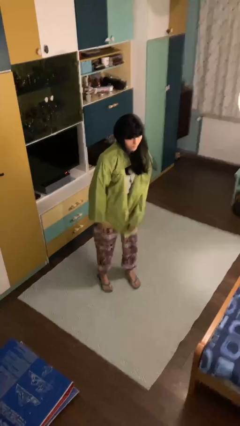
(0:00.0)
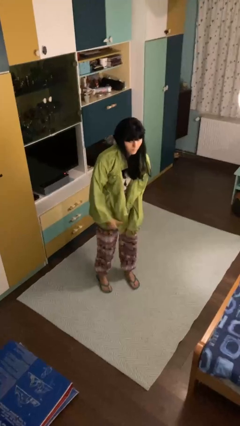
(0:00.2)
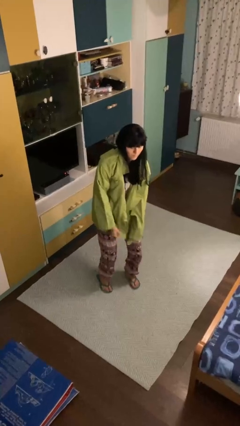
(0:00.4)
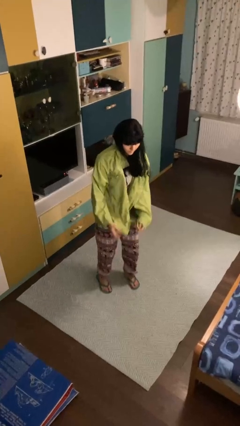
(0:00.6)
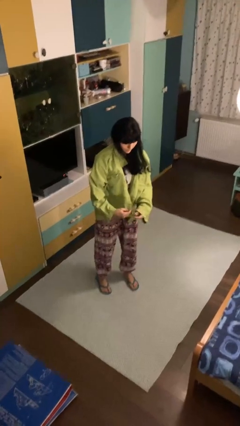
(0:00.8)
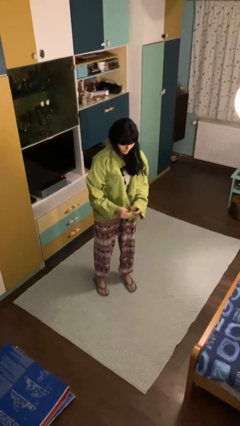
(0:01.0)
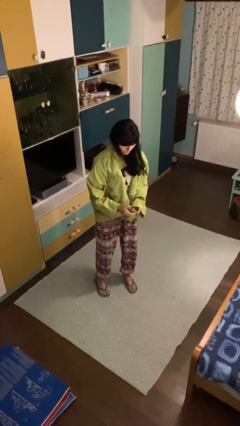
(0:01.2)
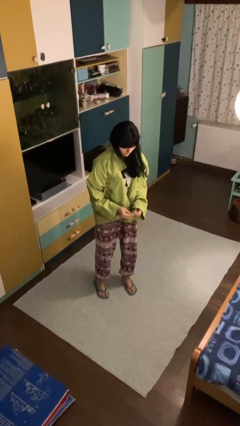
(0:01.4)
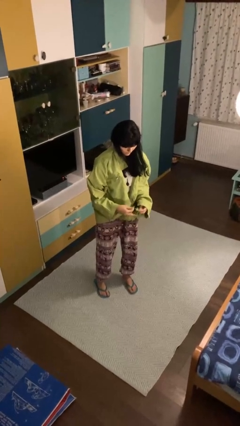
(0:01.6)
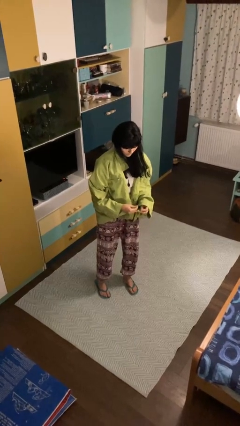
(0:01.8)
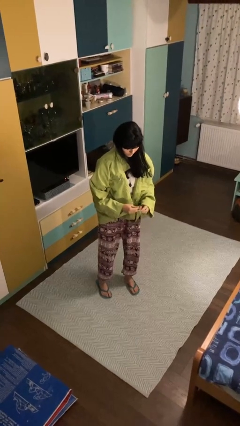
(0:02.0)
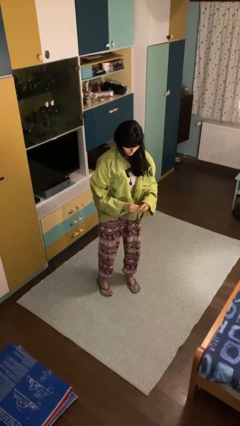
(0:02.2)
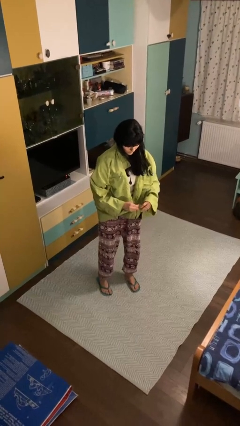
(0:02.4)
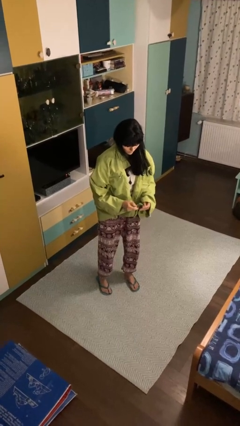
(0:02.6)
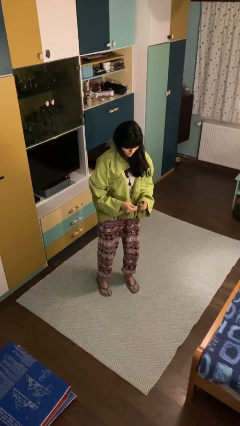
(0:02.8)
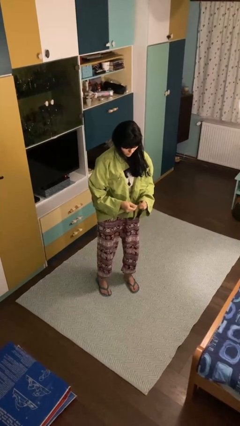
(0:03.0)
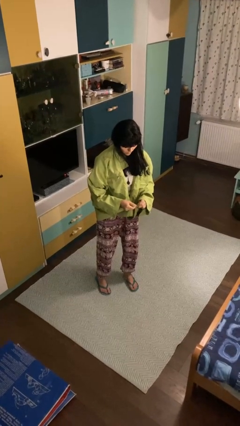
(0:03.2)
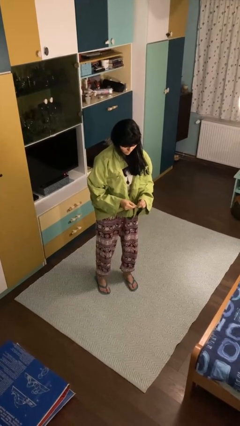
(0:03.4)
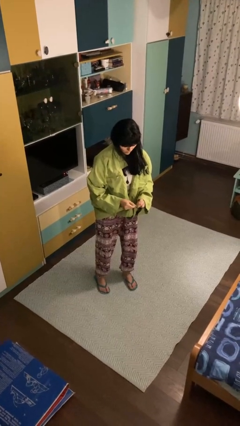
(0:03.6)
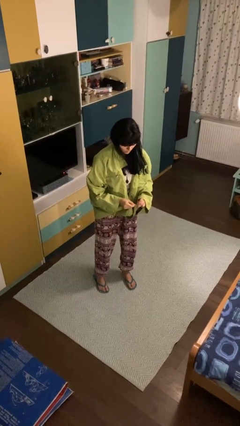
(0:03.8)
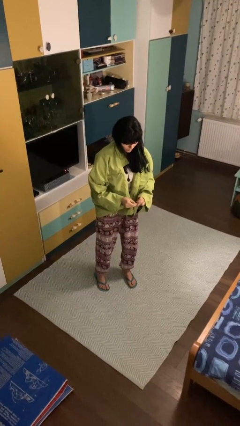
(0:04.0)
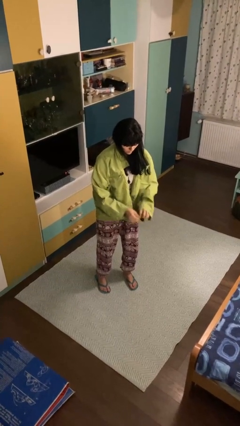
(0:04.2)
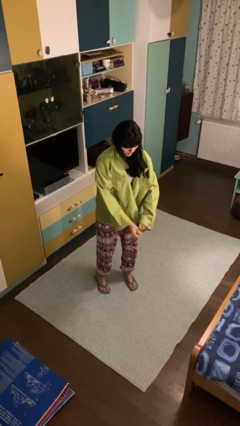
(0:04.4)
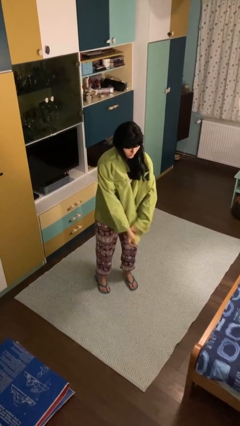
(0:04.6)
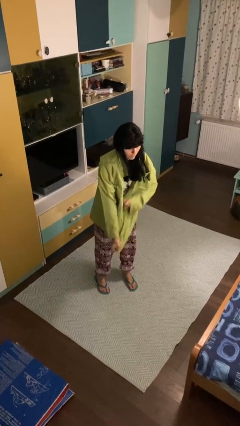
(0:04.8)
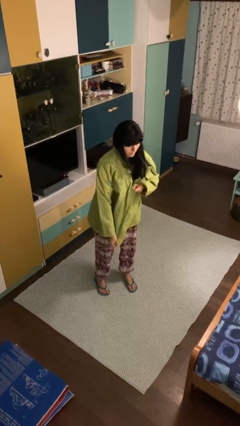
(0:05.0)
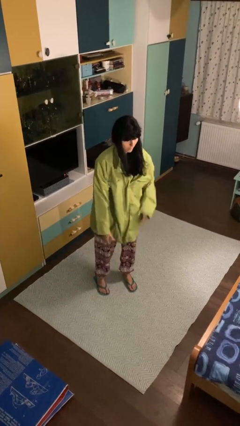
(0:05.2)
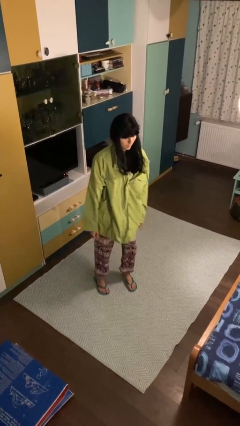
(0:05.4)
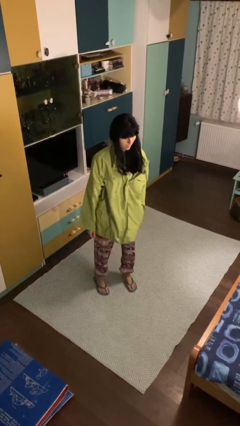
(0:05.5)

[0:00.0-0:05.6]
person zips up jacket

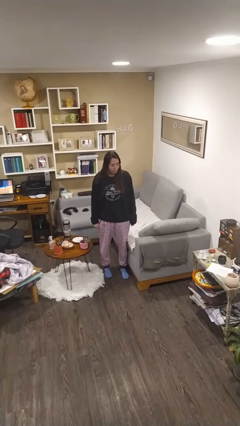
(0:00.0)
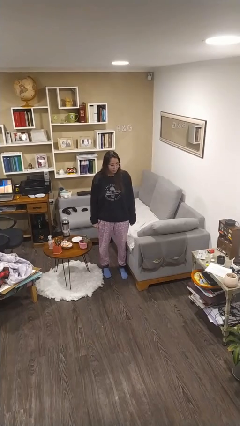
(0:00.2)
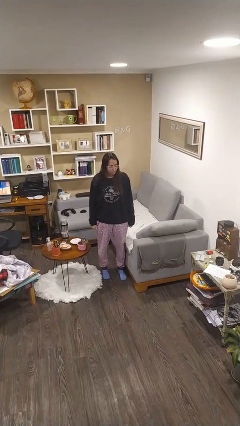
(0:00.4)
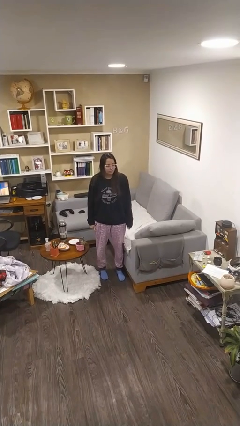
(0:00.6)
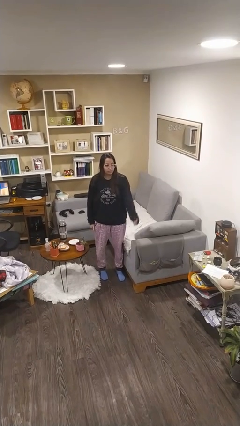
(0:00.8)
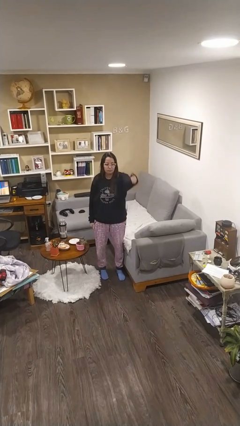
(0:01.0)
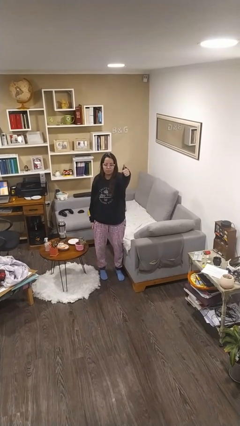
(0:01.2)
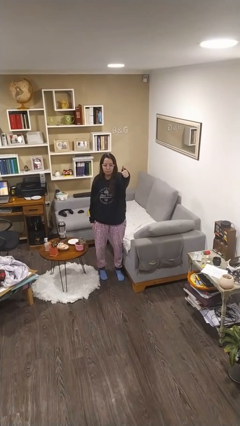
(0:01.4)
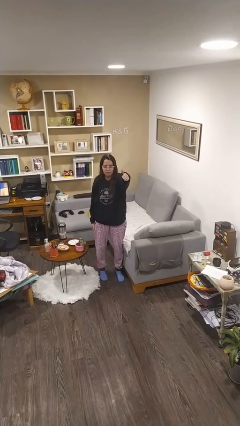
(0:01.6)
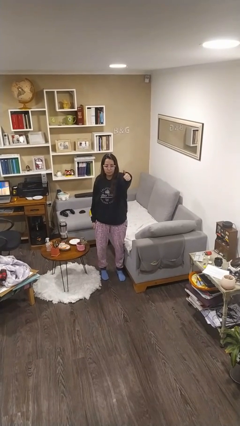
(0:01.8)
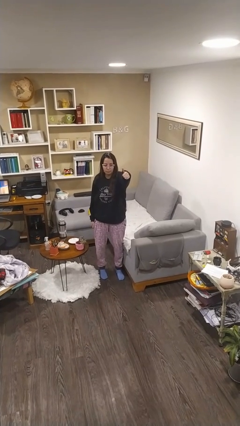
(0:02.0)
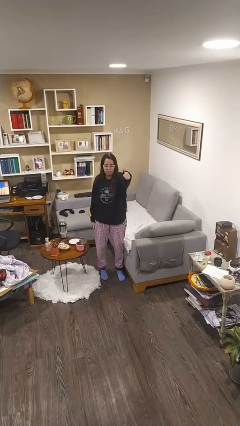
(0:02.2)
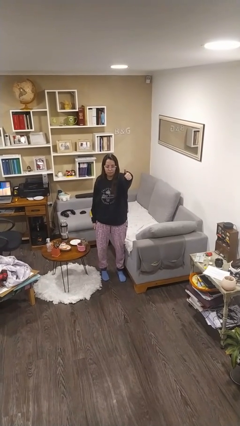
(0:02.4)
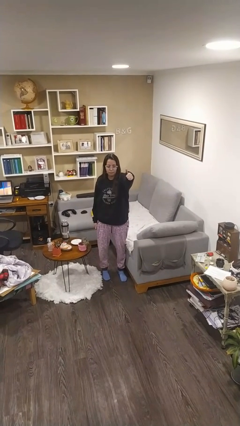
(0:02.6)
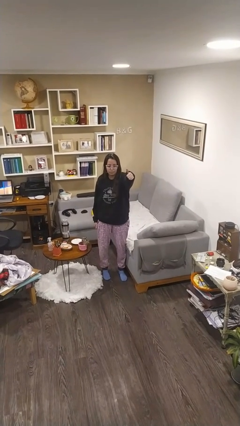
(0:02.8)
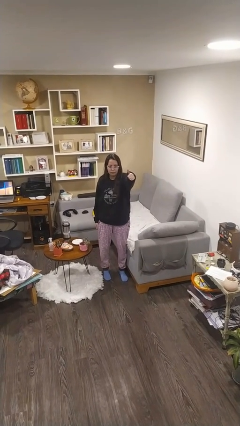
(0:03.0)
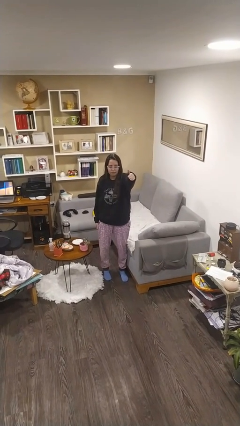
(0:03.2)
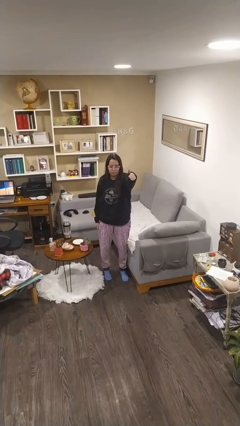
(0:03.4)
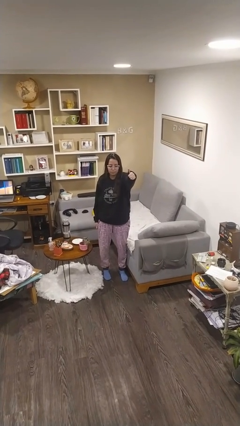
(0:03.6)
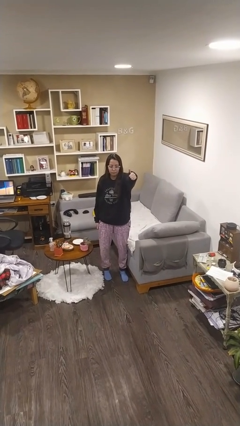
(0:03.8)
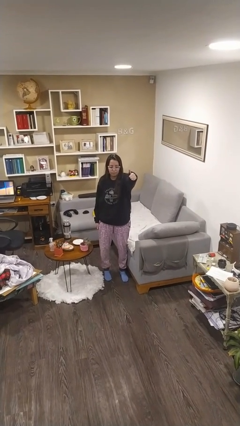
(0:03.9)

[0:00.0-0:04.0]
person gestures thumbs up

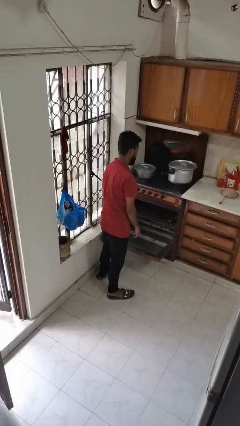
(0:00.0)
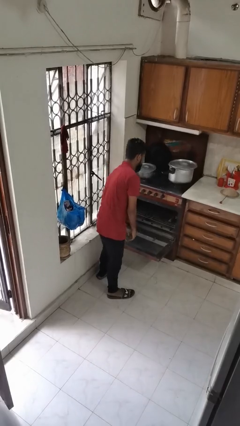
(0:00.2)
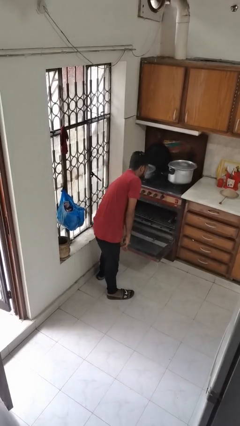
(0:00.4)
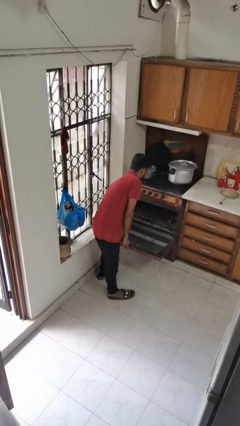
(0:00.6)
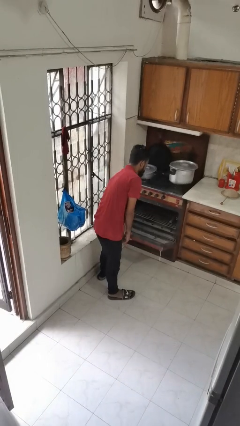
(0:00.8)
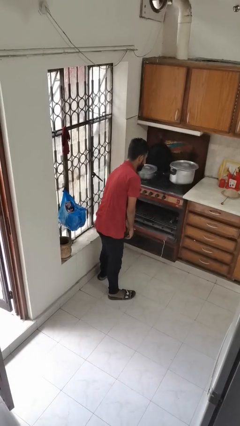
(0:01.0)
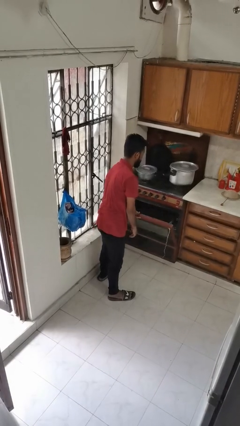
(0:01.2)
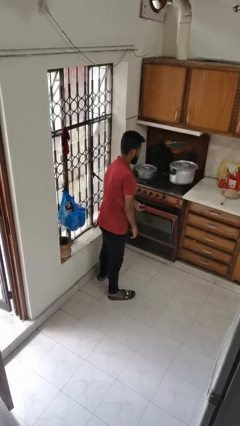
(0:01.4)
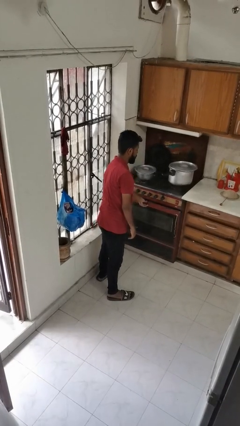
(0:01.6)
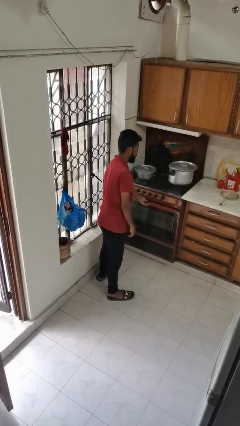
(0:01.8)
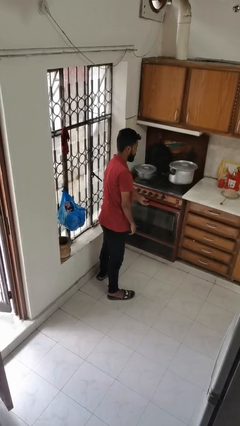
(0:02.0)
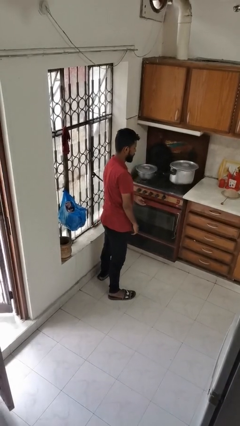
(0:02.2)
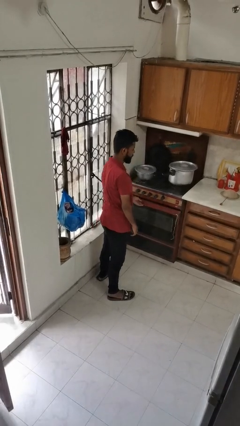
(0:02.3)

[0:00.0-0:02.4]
person closes oven door

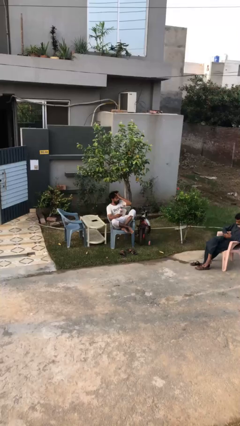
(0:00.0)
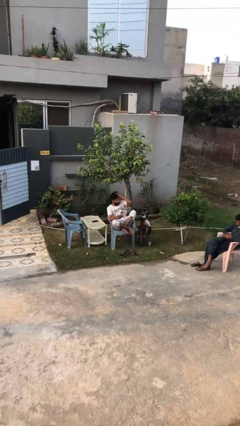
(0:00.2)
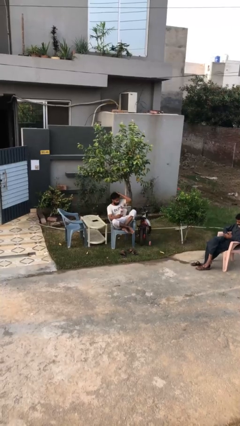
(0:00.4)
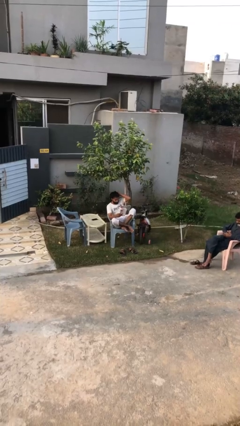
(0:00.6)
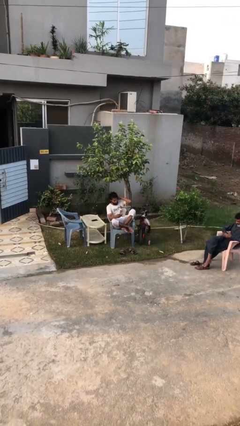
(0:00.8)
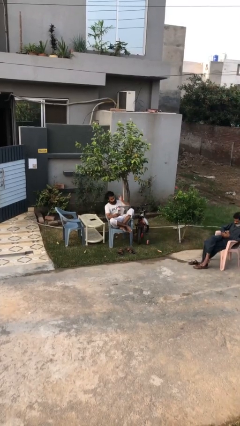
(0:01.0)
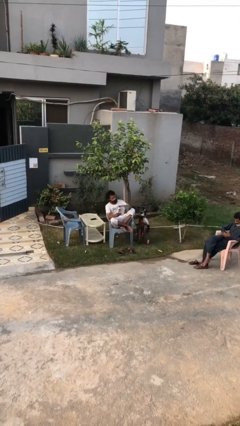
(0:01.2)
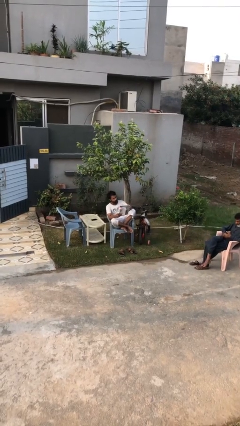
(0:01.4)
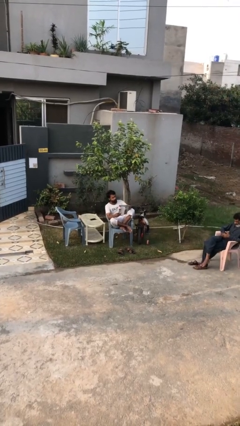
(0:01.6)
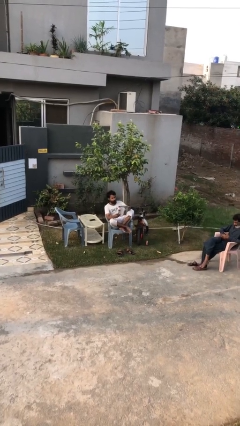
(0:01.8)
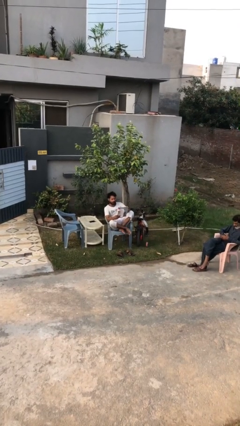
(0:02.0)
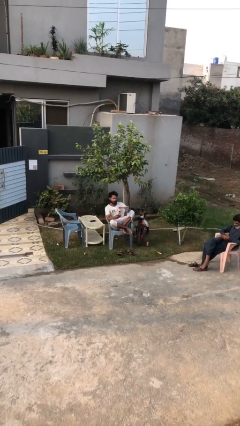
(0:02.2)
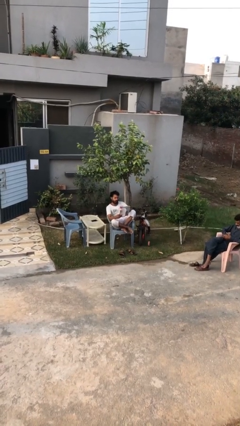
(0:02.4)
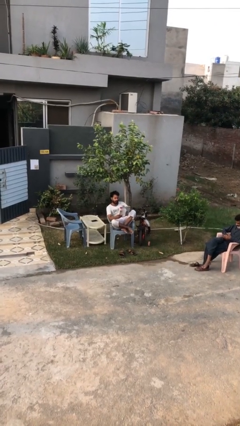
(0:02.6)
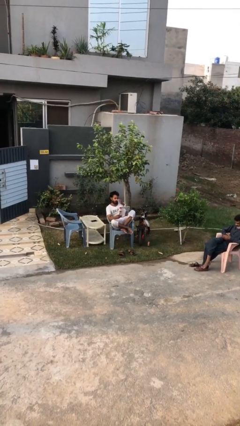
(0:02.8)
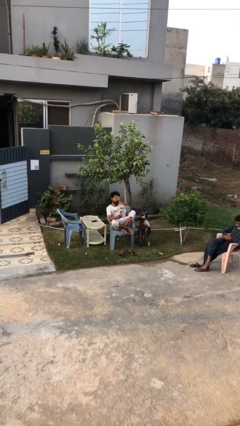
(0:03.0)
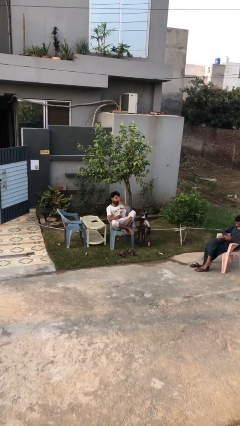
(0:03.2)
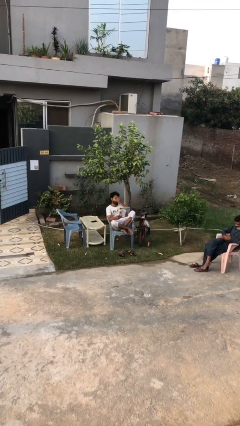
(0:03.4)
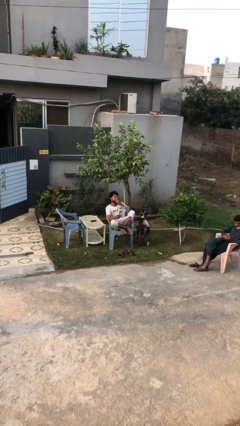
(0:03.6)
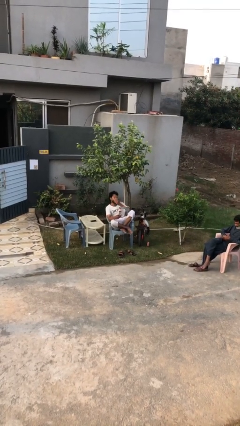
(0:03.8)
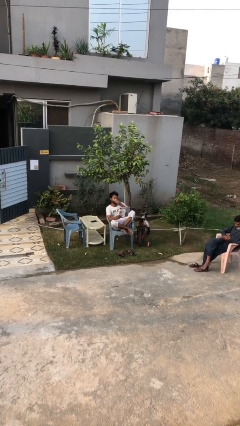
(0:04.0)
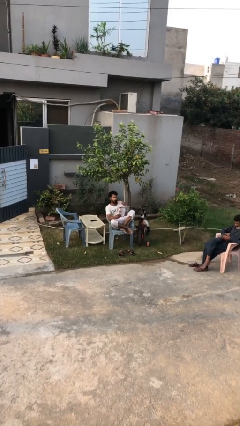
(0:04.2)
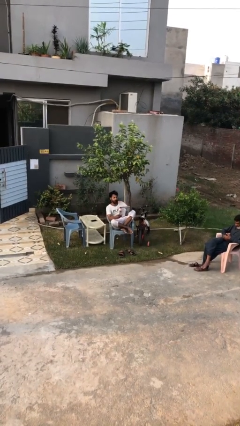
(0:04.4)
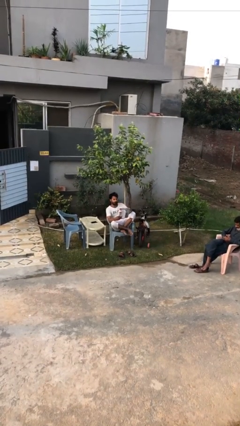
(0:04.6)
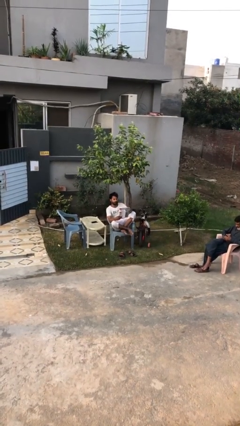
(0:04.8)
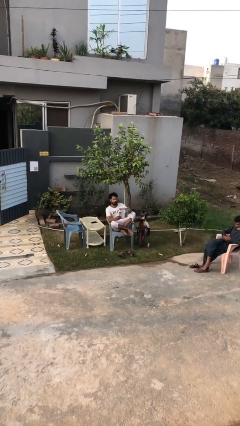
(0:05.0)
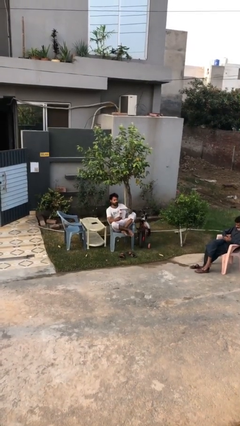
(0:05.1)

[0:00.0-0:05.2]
person reads document

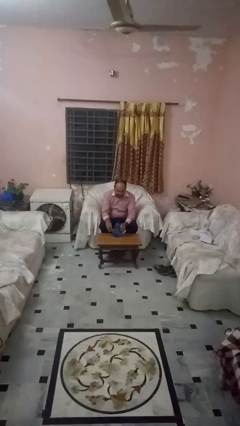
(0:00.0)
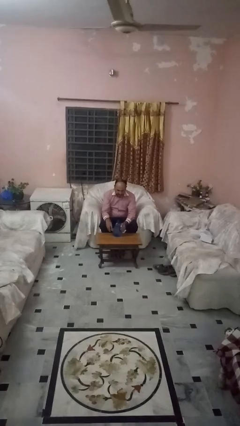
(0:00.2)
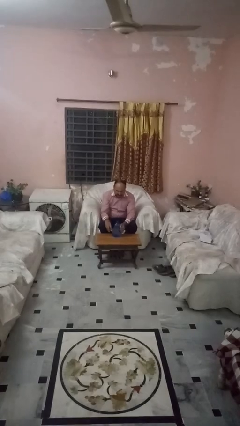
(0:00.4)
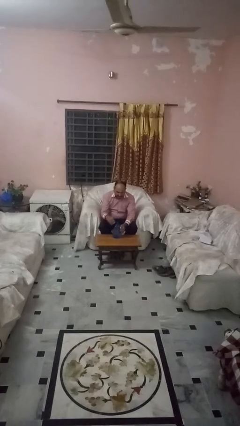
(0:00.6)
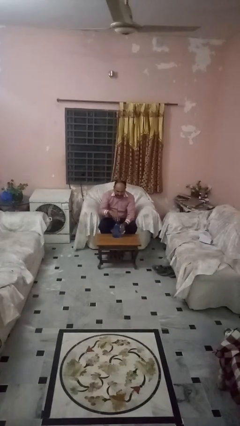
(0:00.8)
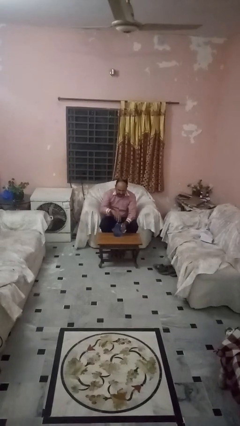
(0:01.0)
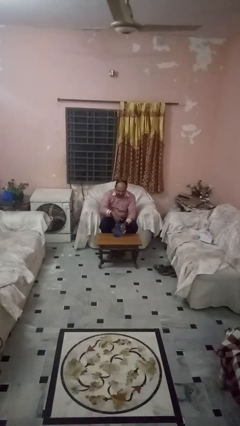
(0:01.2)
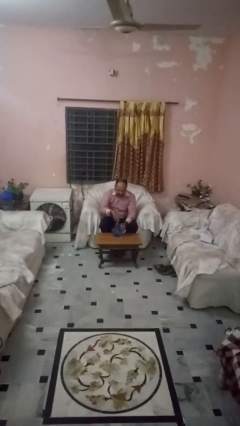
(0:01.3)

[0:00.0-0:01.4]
person screws lid to bottle
